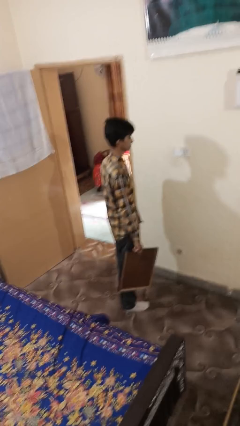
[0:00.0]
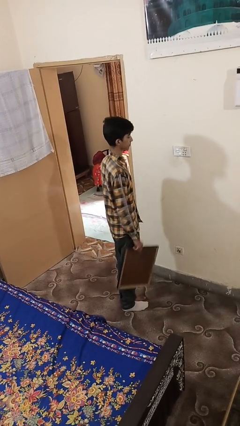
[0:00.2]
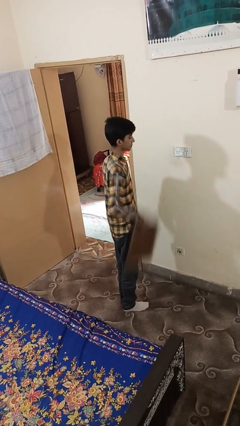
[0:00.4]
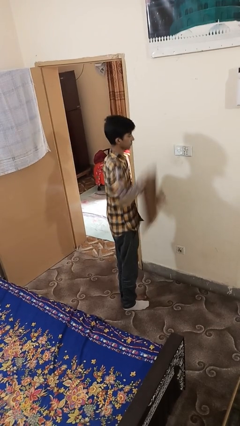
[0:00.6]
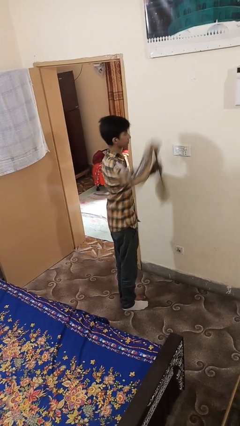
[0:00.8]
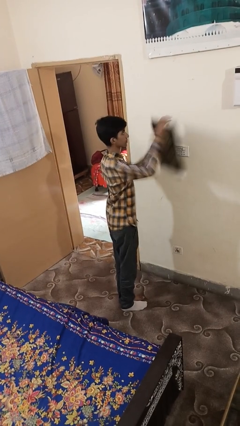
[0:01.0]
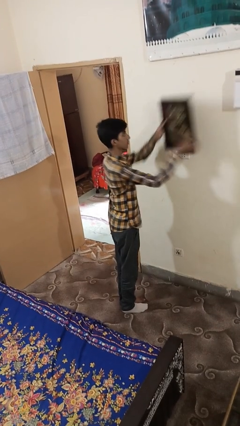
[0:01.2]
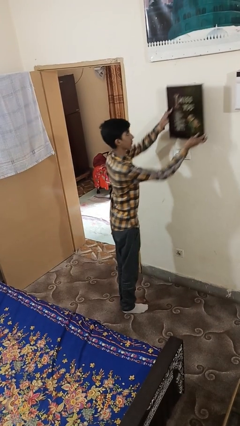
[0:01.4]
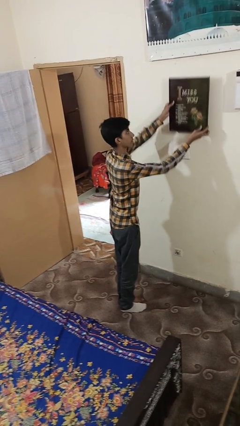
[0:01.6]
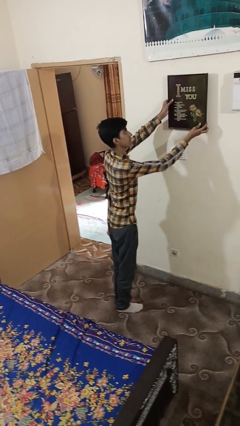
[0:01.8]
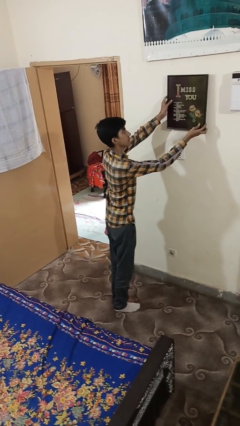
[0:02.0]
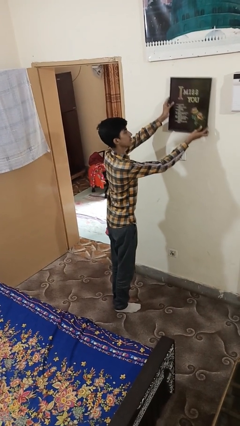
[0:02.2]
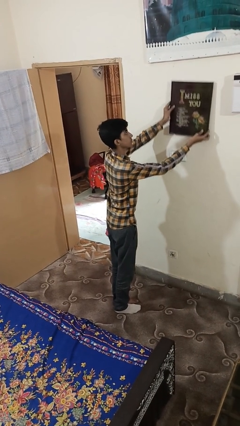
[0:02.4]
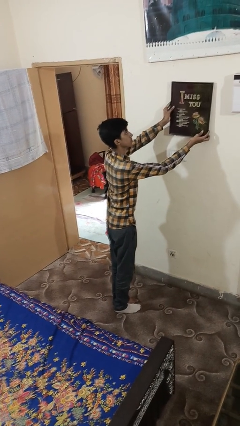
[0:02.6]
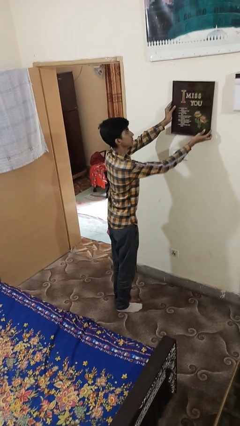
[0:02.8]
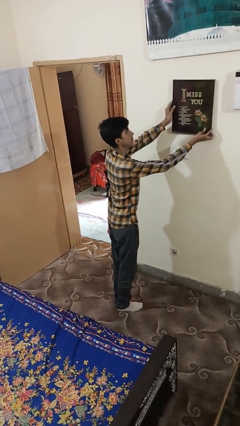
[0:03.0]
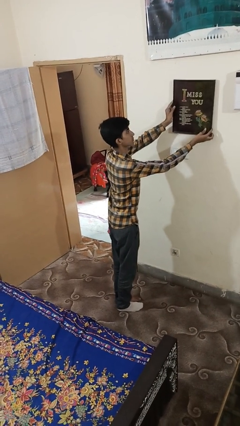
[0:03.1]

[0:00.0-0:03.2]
person puts up picture frame

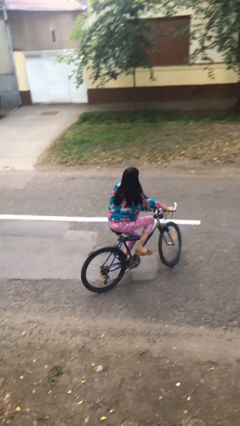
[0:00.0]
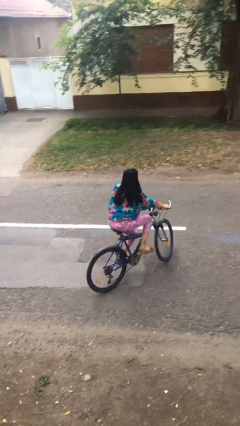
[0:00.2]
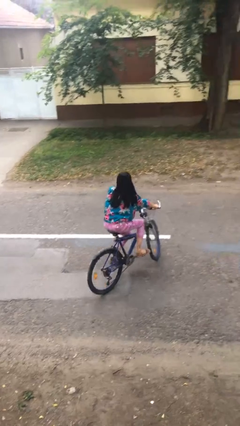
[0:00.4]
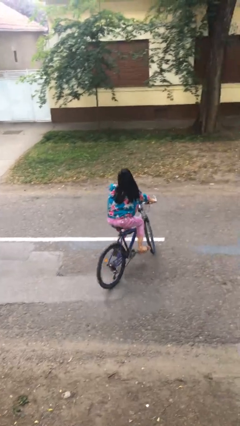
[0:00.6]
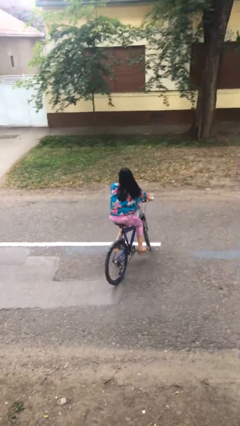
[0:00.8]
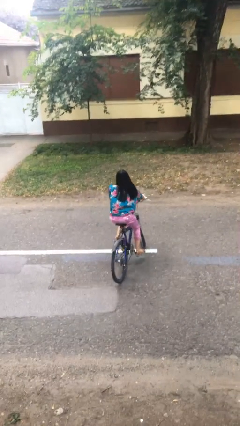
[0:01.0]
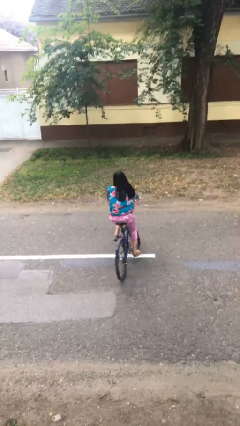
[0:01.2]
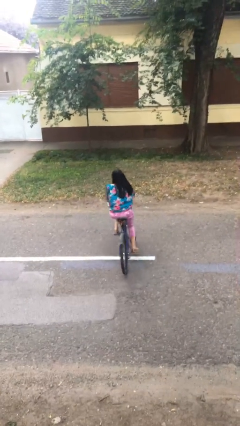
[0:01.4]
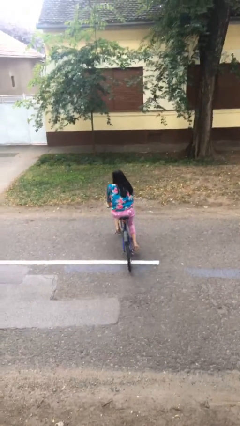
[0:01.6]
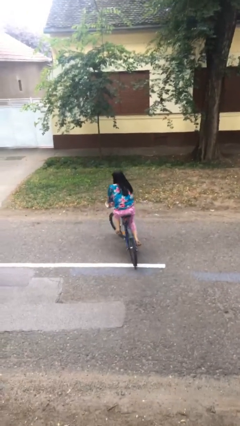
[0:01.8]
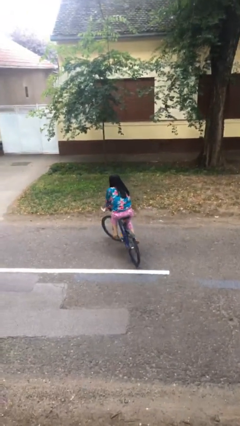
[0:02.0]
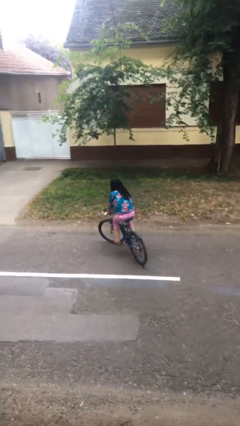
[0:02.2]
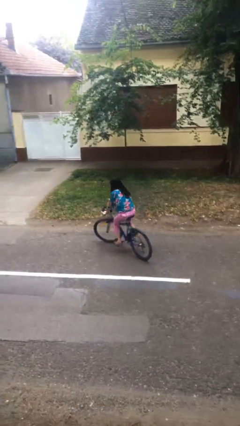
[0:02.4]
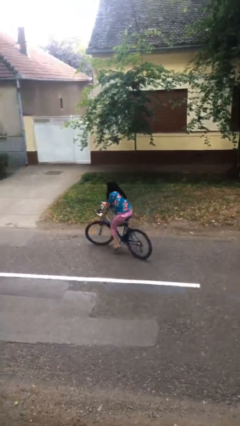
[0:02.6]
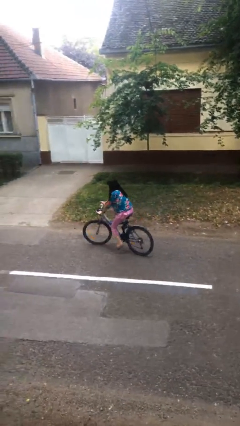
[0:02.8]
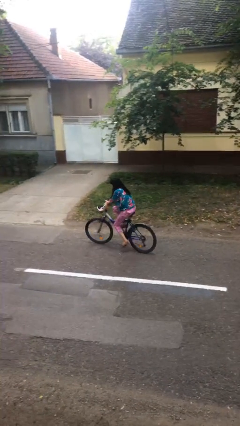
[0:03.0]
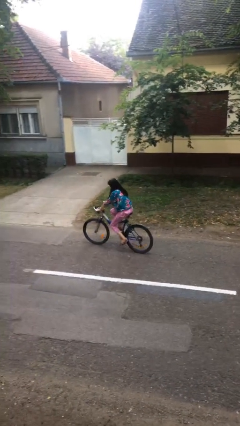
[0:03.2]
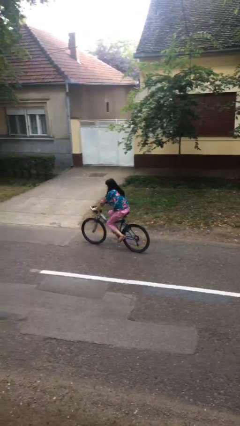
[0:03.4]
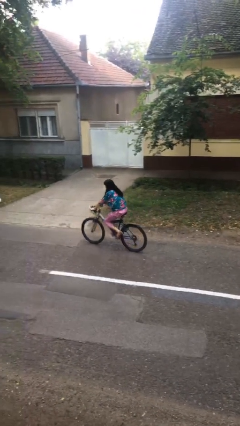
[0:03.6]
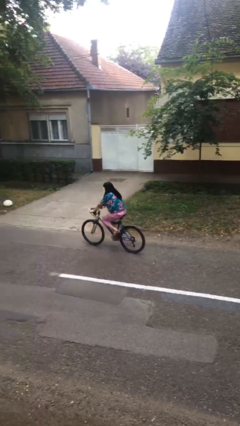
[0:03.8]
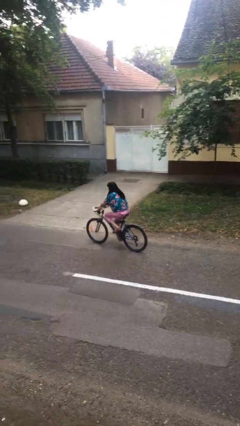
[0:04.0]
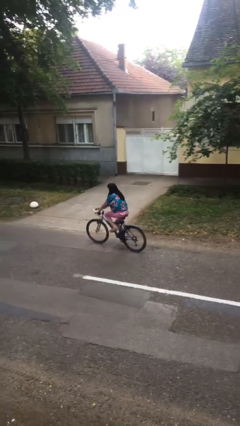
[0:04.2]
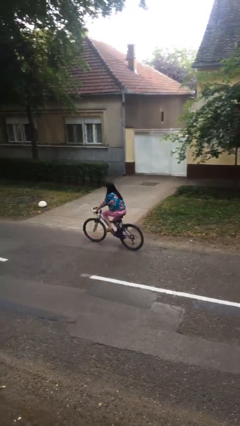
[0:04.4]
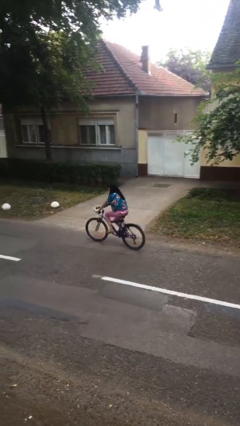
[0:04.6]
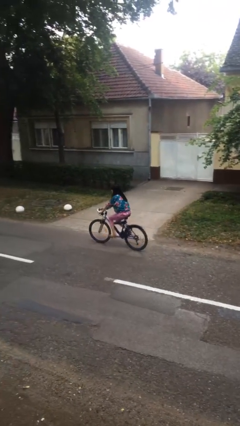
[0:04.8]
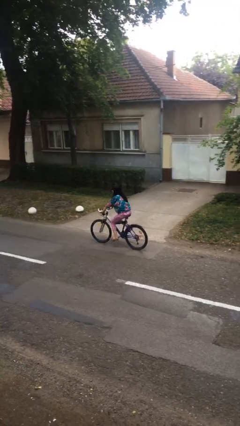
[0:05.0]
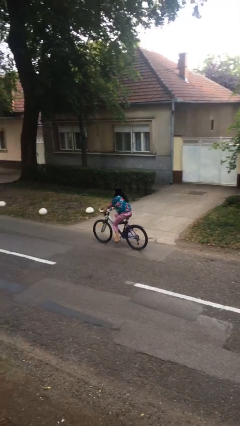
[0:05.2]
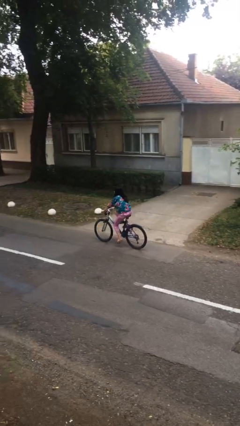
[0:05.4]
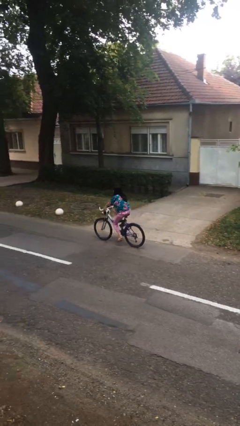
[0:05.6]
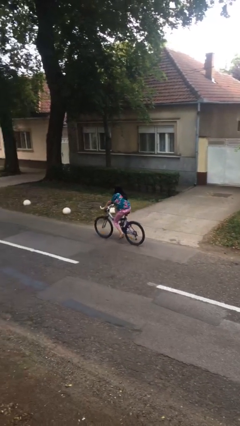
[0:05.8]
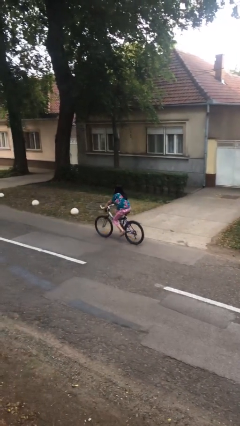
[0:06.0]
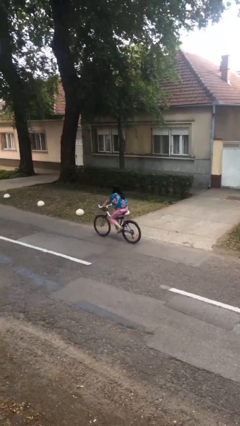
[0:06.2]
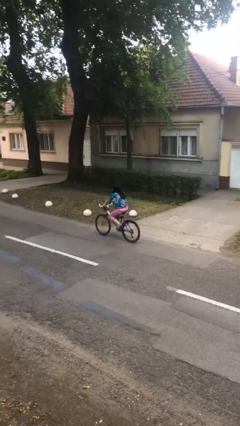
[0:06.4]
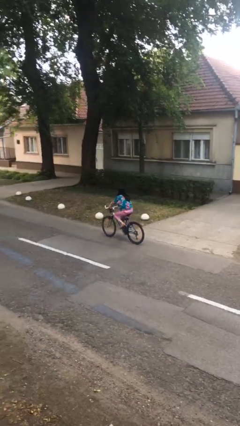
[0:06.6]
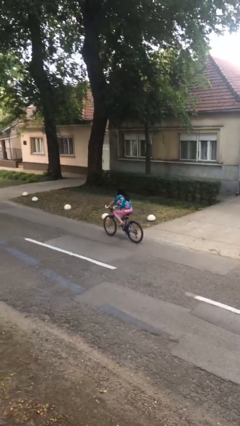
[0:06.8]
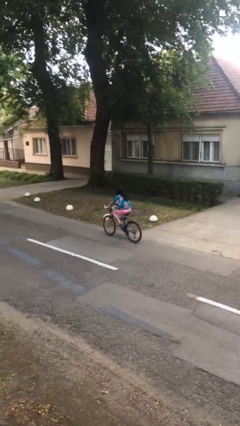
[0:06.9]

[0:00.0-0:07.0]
person rides bicycle

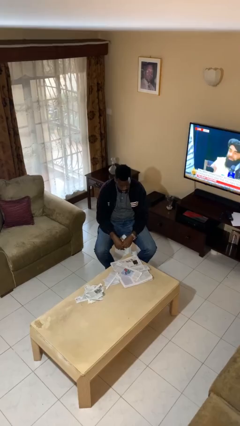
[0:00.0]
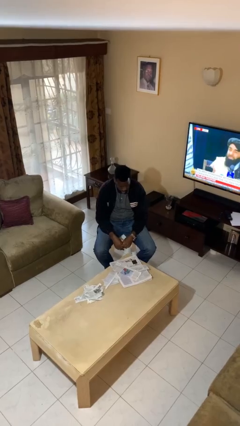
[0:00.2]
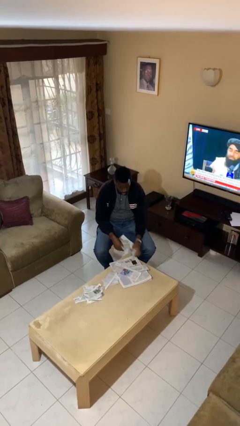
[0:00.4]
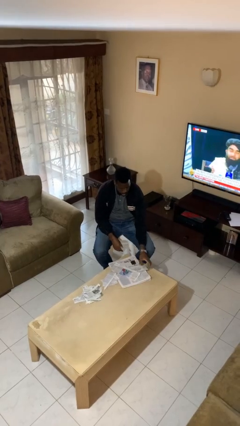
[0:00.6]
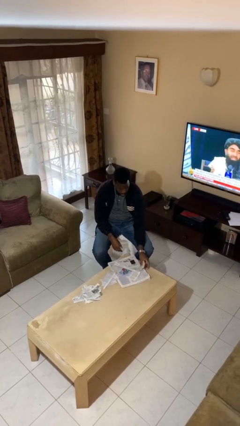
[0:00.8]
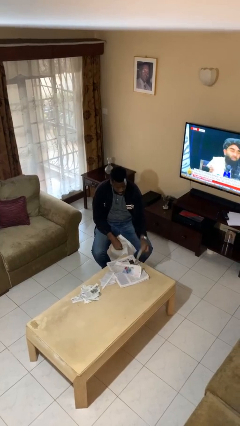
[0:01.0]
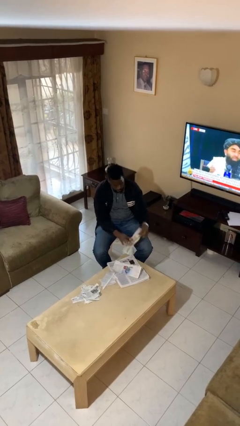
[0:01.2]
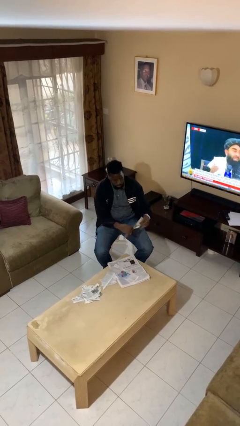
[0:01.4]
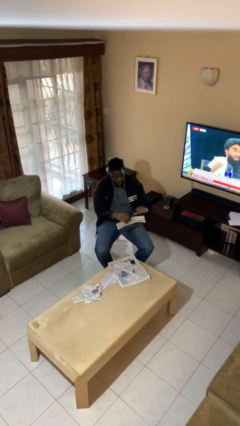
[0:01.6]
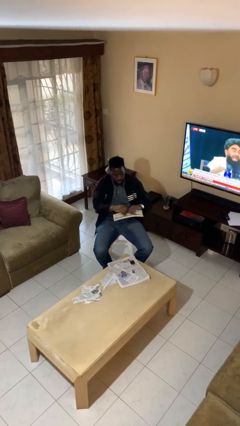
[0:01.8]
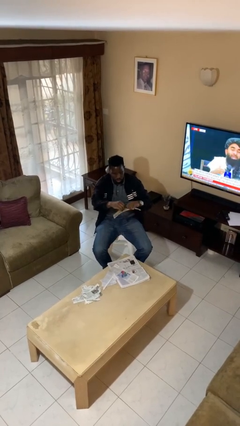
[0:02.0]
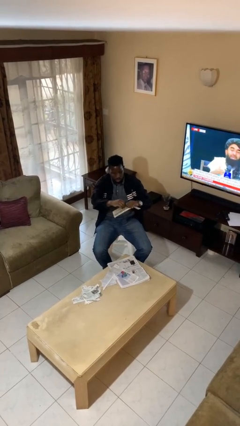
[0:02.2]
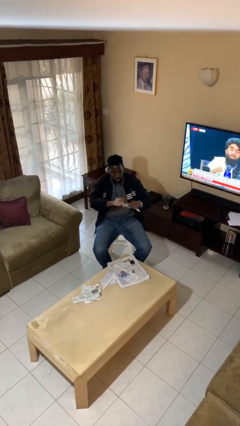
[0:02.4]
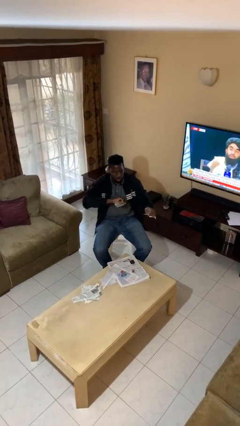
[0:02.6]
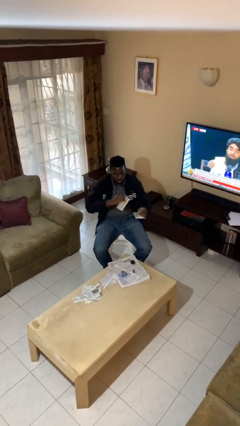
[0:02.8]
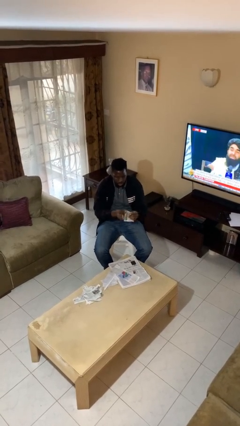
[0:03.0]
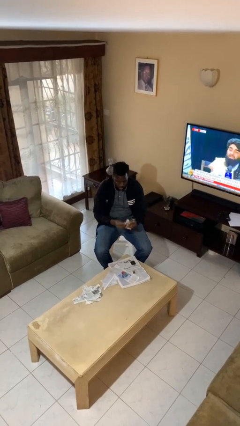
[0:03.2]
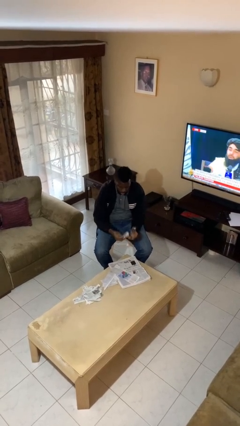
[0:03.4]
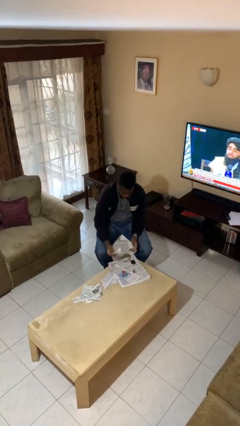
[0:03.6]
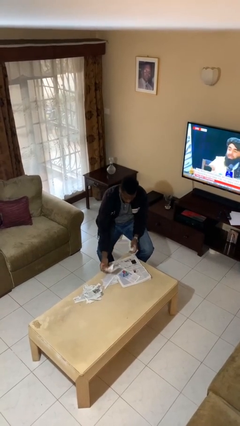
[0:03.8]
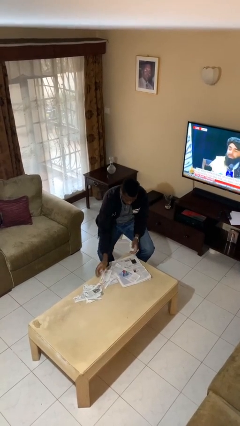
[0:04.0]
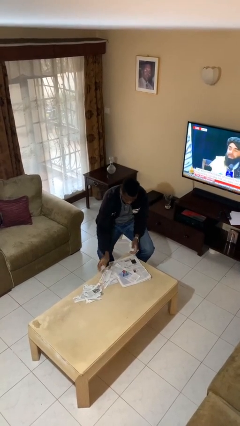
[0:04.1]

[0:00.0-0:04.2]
person tears paper

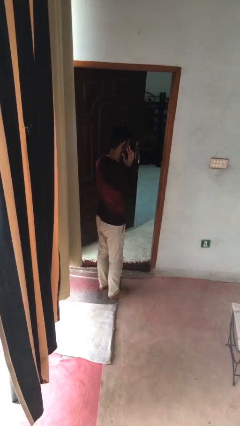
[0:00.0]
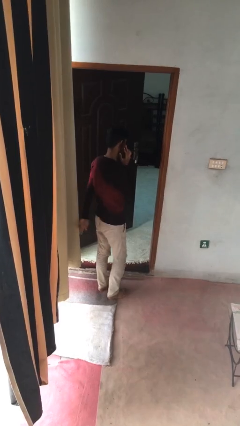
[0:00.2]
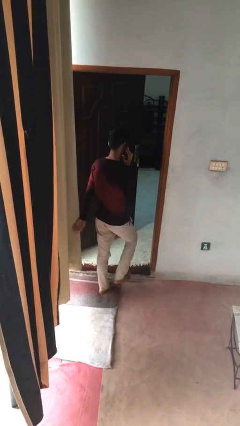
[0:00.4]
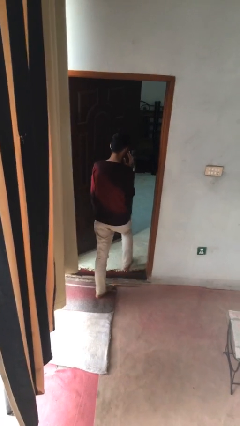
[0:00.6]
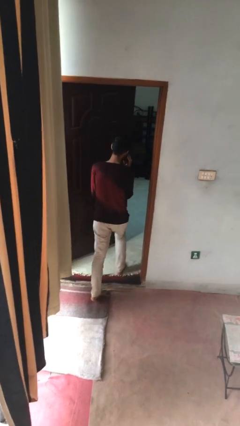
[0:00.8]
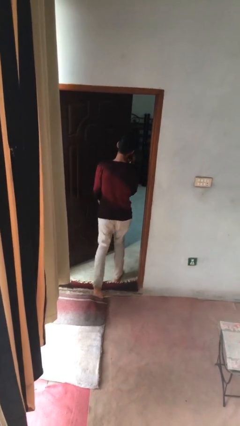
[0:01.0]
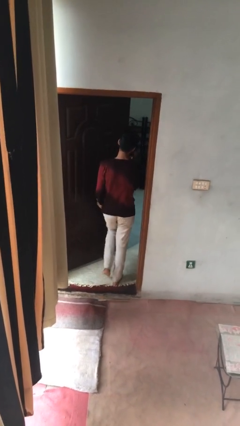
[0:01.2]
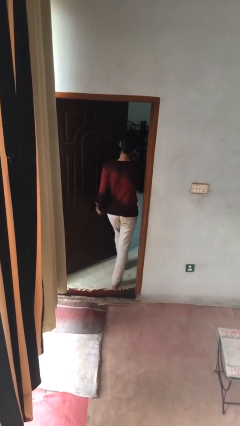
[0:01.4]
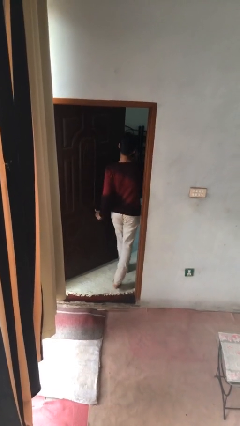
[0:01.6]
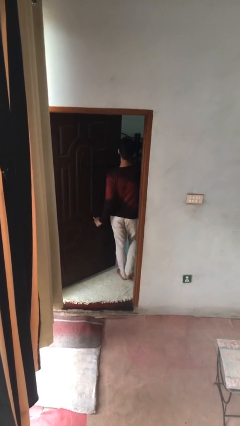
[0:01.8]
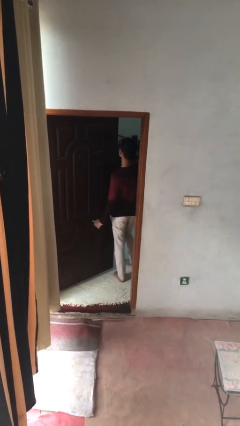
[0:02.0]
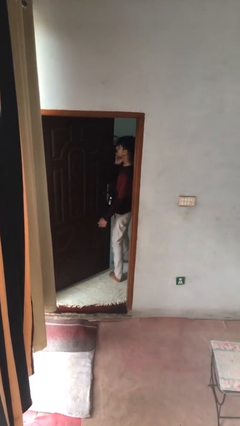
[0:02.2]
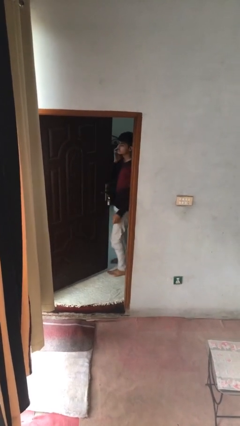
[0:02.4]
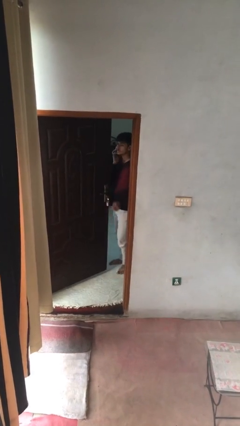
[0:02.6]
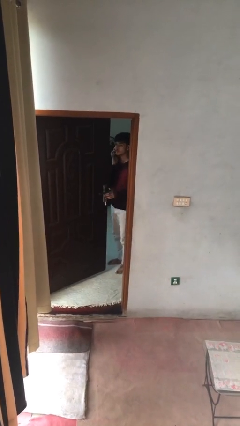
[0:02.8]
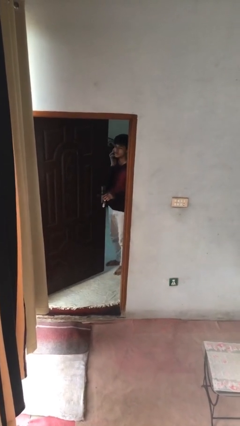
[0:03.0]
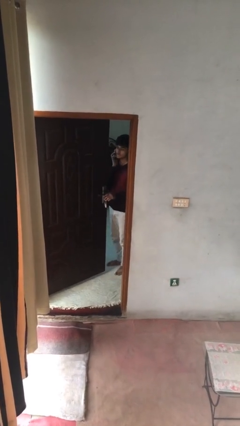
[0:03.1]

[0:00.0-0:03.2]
person exits scene through structure
